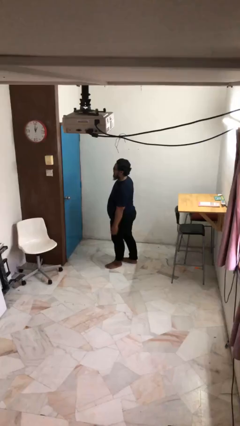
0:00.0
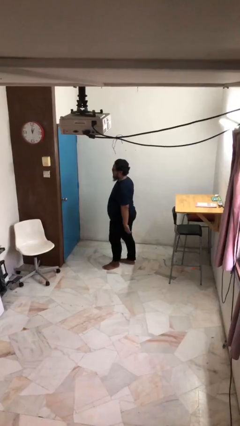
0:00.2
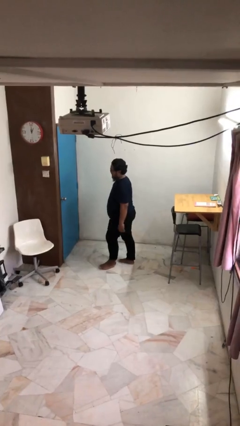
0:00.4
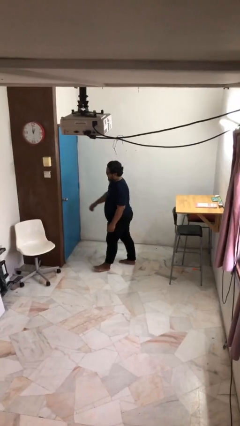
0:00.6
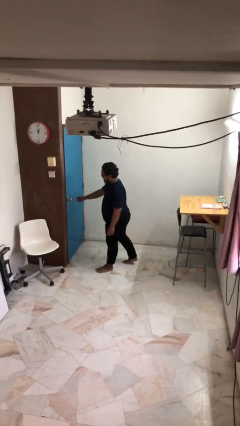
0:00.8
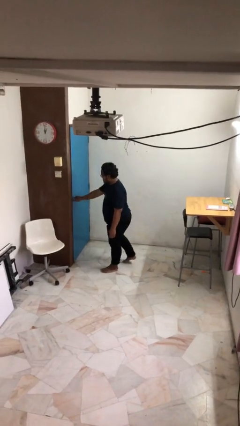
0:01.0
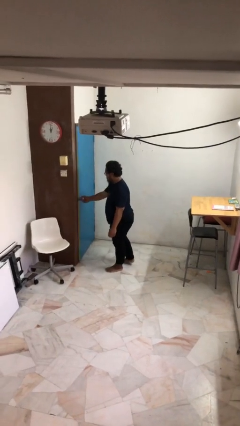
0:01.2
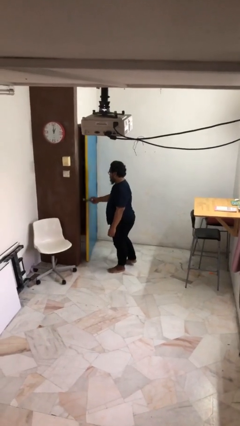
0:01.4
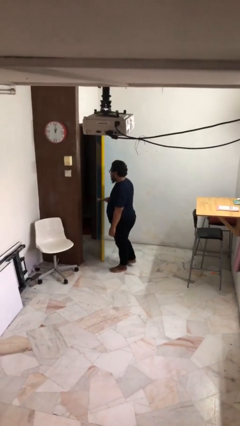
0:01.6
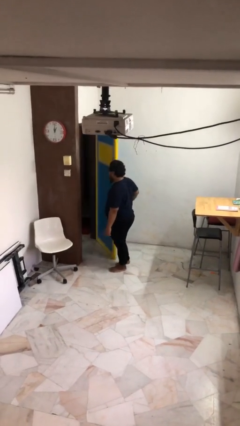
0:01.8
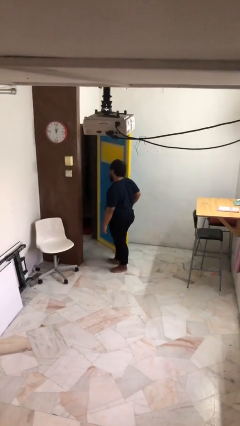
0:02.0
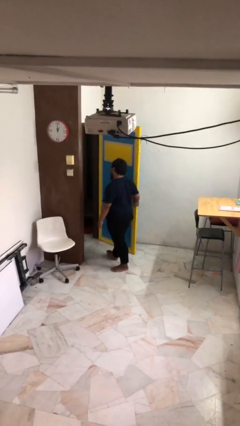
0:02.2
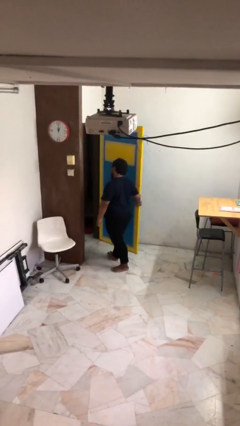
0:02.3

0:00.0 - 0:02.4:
person opens facility door

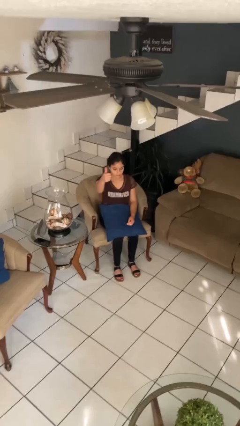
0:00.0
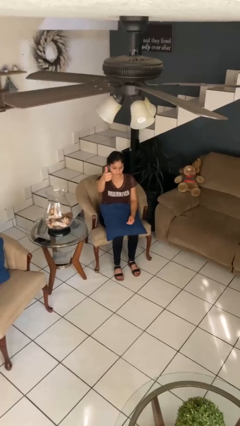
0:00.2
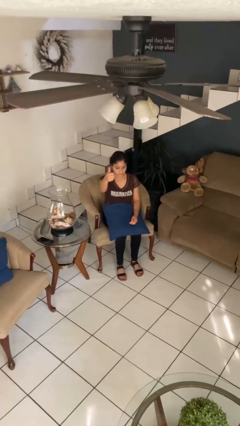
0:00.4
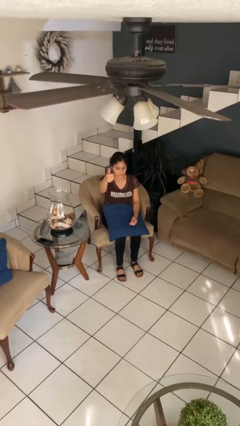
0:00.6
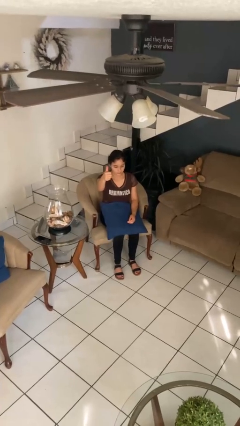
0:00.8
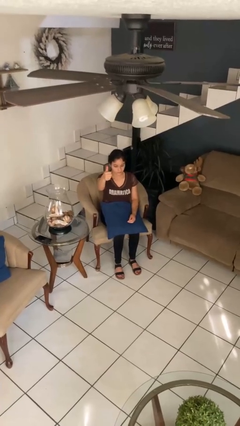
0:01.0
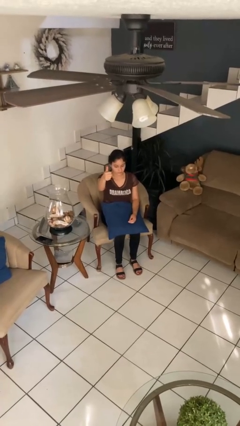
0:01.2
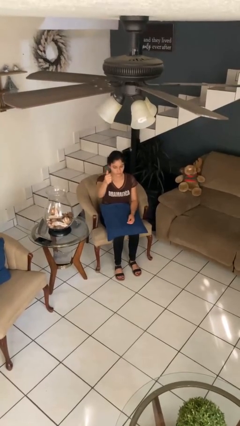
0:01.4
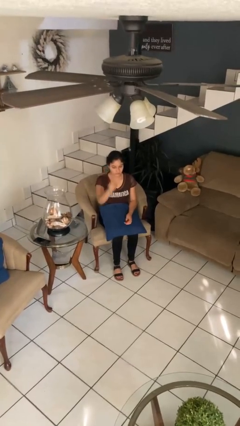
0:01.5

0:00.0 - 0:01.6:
person gestures thumbs up

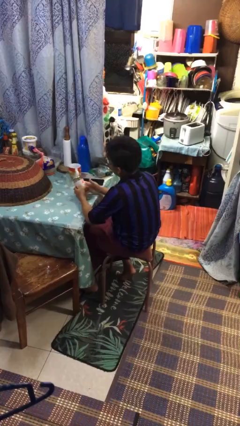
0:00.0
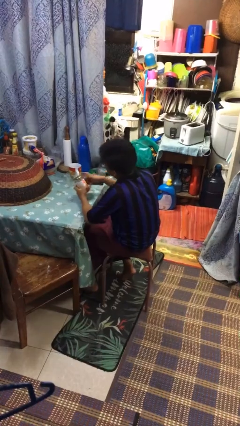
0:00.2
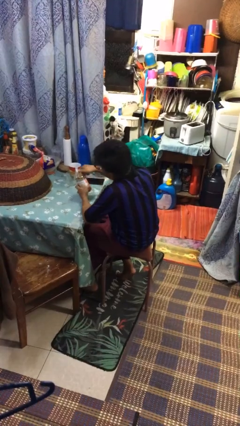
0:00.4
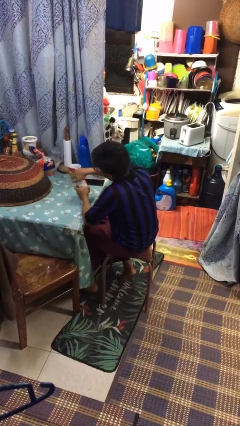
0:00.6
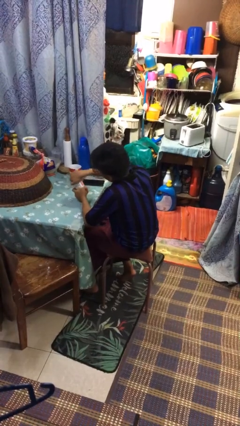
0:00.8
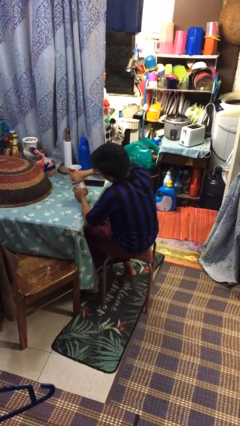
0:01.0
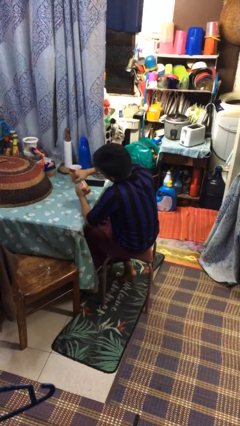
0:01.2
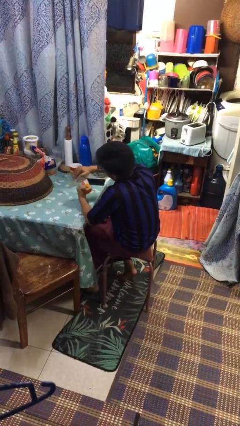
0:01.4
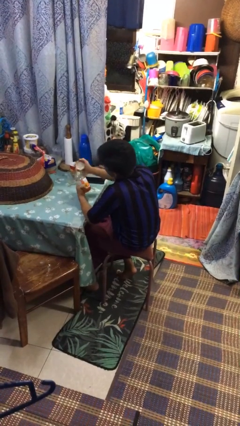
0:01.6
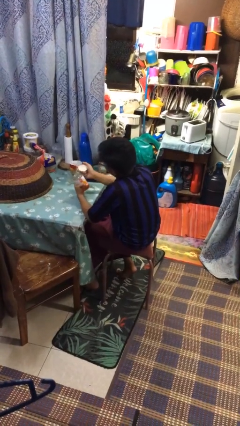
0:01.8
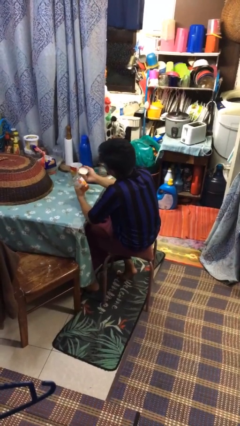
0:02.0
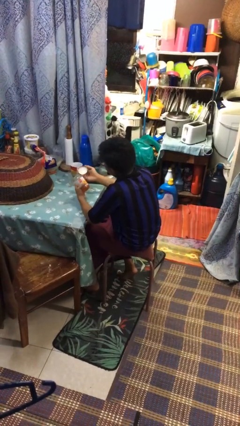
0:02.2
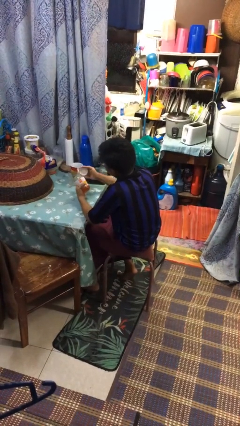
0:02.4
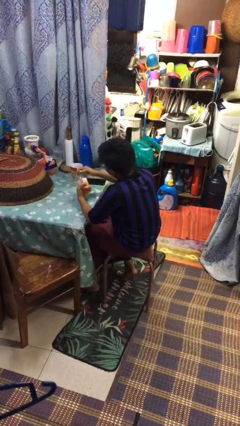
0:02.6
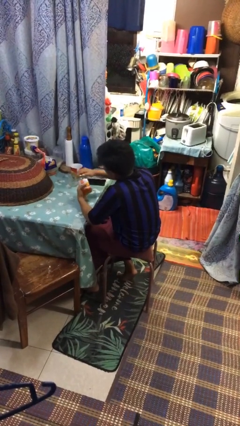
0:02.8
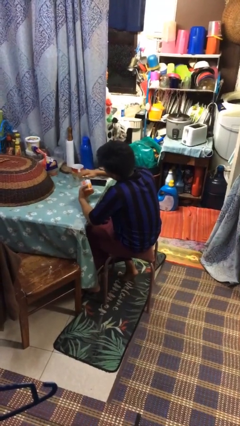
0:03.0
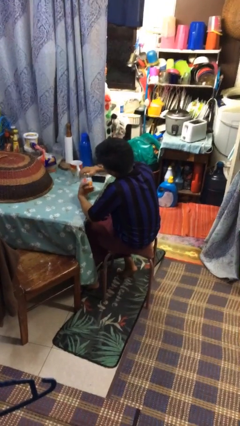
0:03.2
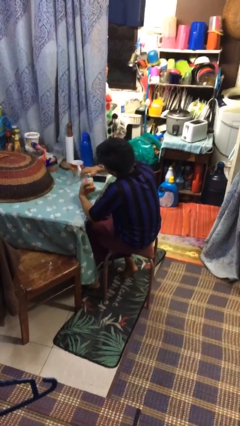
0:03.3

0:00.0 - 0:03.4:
person opens jar

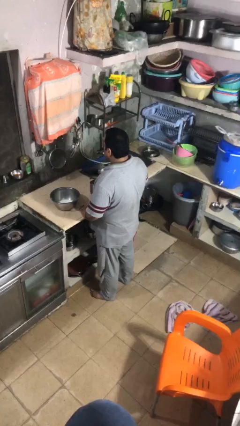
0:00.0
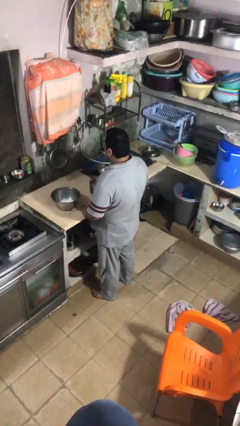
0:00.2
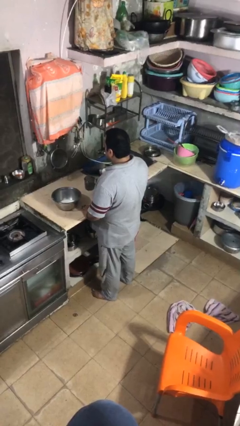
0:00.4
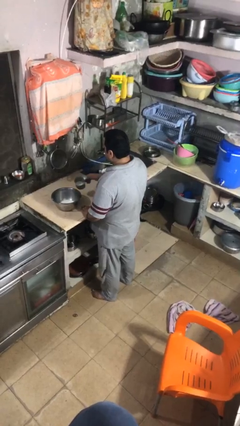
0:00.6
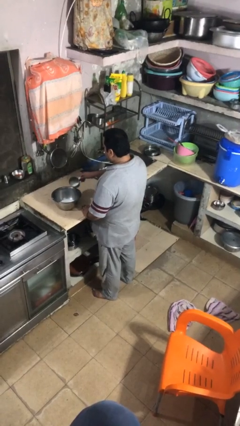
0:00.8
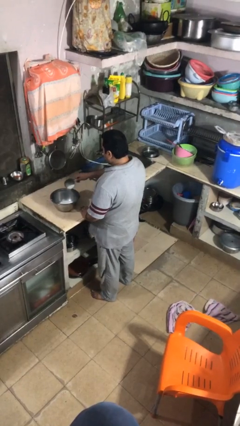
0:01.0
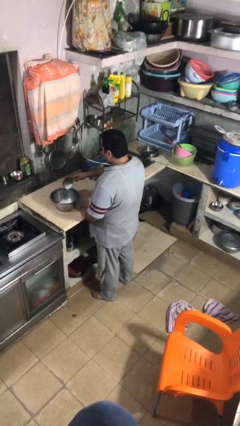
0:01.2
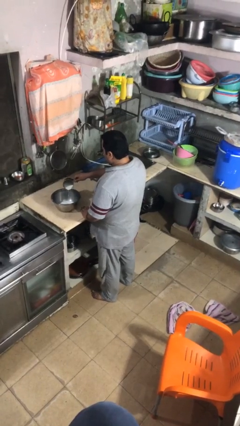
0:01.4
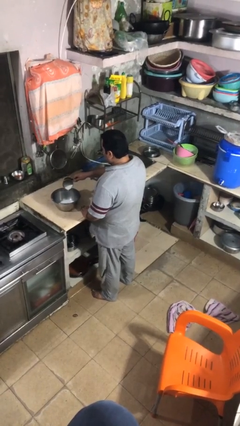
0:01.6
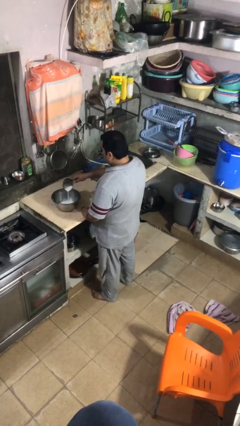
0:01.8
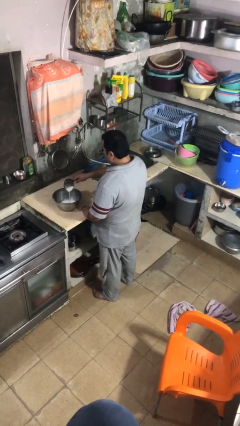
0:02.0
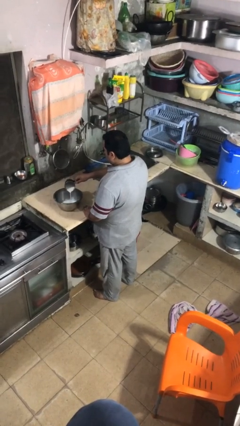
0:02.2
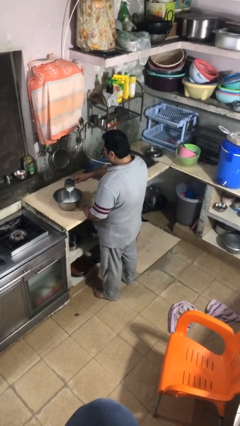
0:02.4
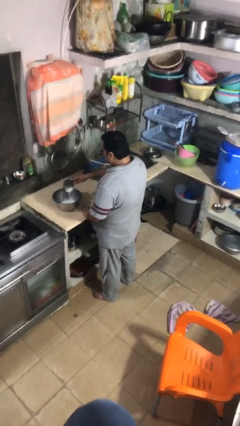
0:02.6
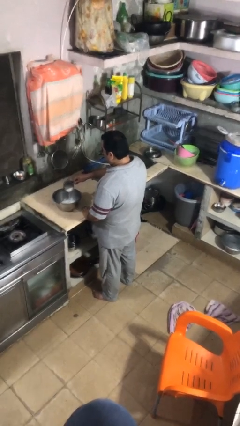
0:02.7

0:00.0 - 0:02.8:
person pours into bowl

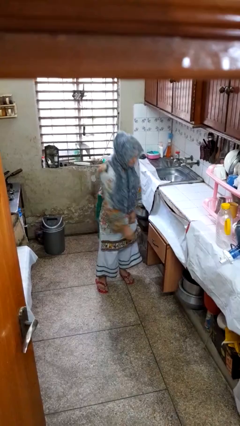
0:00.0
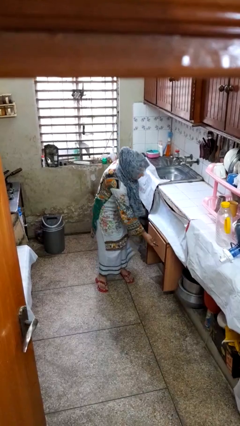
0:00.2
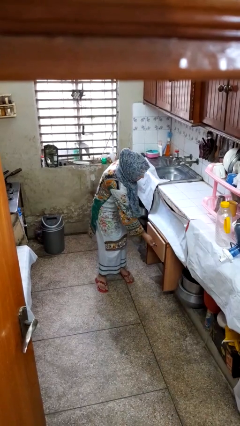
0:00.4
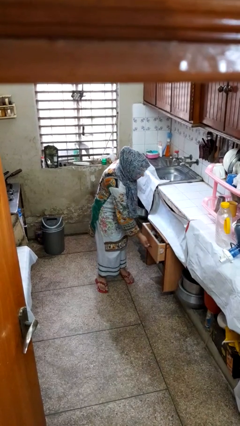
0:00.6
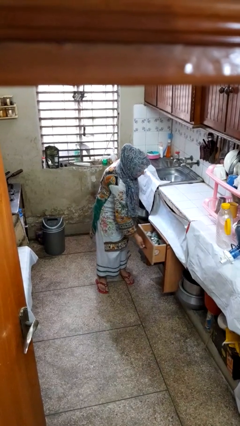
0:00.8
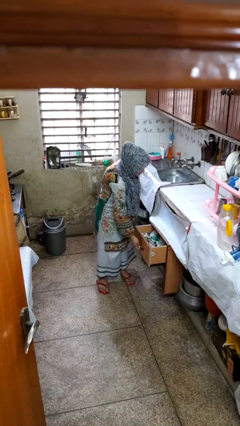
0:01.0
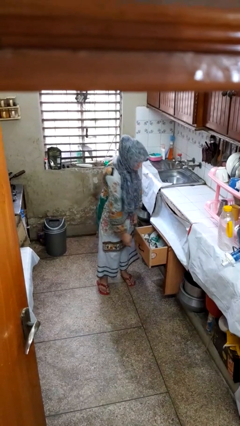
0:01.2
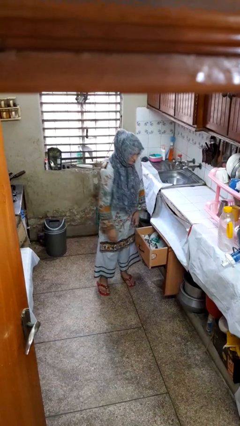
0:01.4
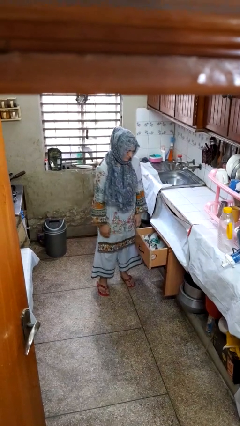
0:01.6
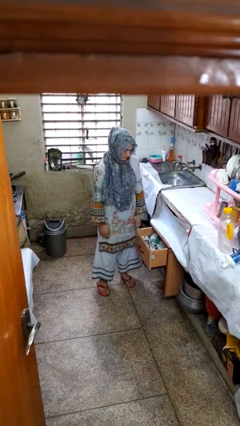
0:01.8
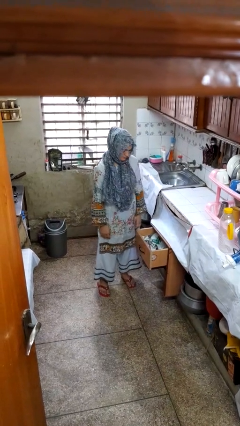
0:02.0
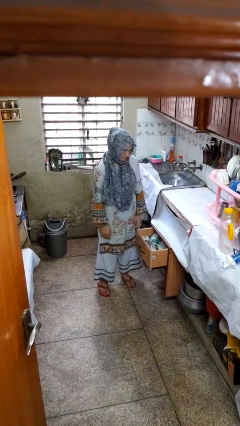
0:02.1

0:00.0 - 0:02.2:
person opens kitchen drawer

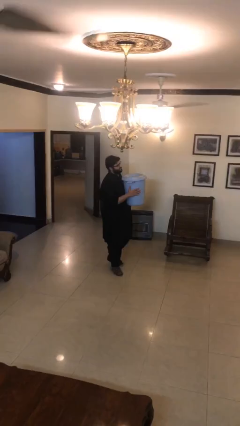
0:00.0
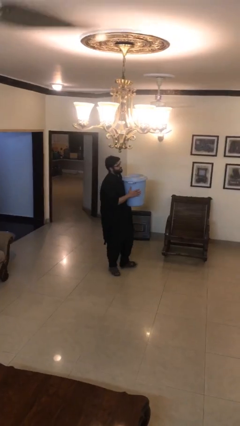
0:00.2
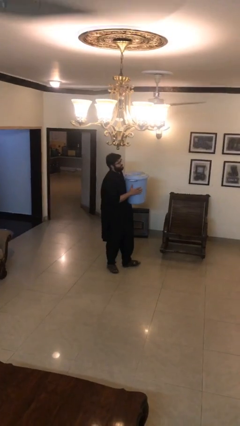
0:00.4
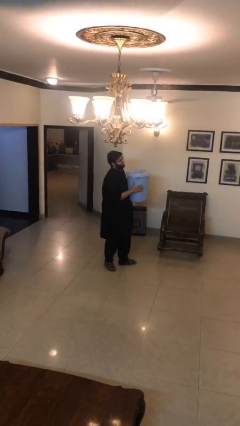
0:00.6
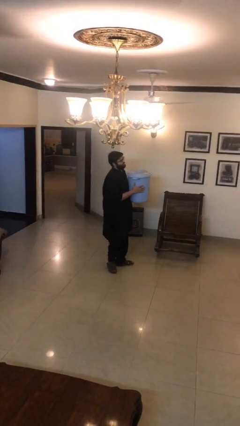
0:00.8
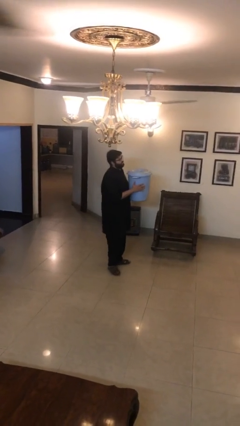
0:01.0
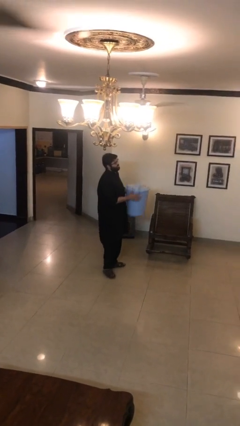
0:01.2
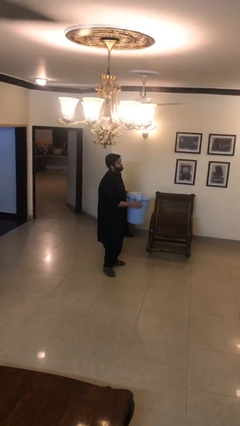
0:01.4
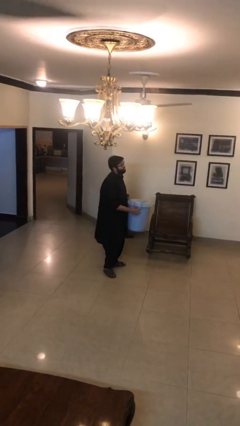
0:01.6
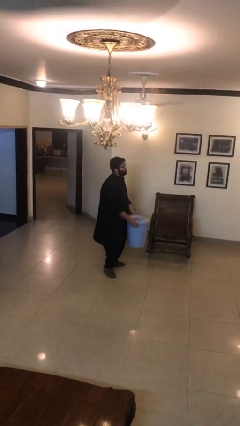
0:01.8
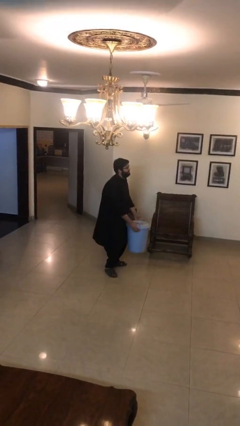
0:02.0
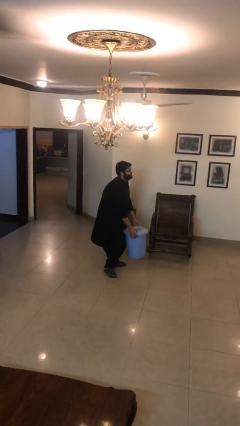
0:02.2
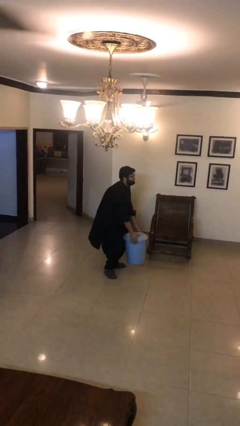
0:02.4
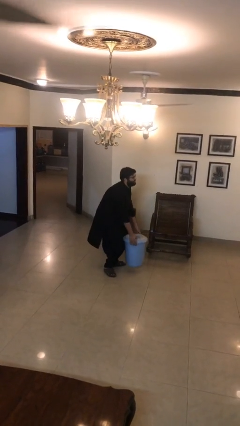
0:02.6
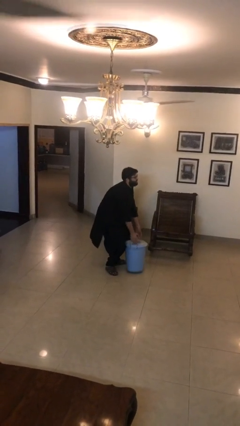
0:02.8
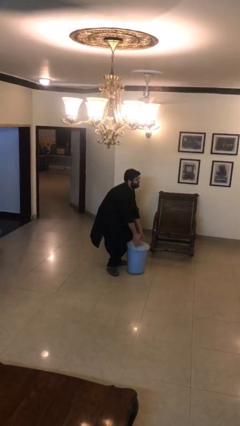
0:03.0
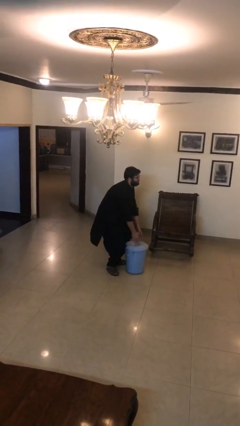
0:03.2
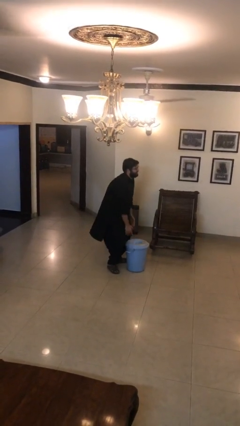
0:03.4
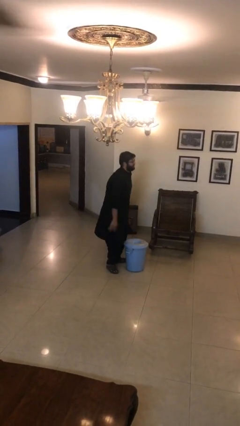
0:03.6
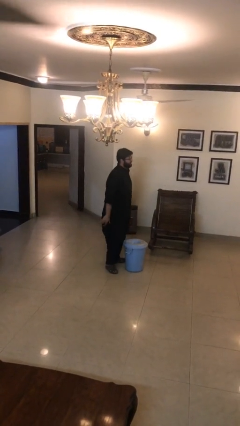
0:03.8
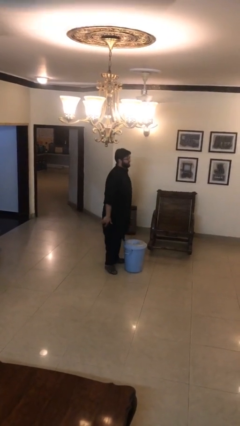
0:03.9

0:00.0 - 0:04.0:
person puts down object on floor

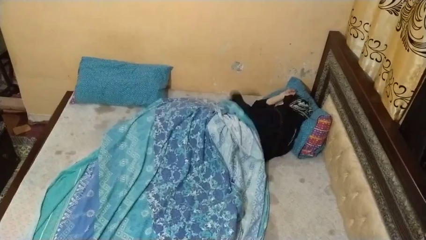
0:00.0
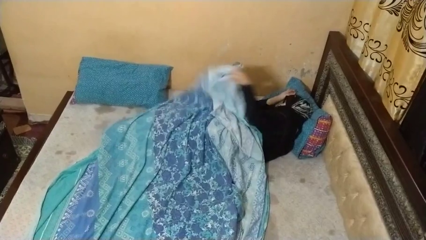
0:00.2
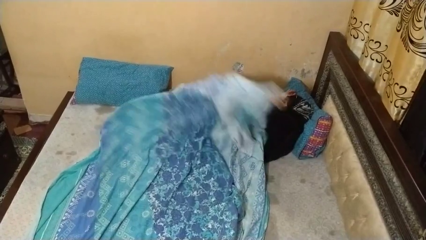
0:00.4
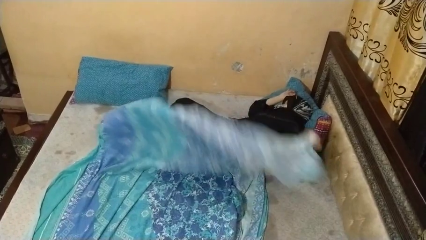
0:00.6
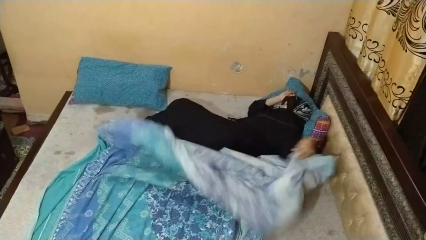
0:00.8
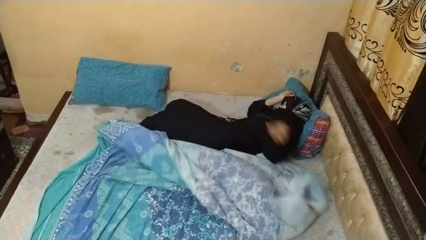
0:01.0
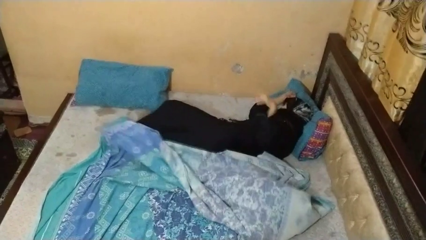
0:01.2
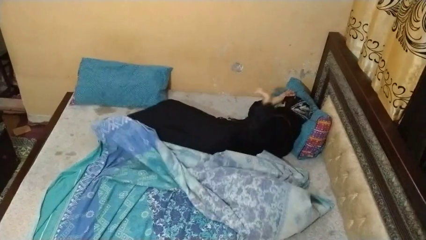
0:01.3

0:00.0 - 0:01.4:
person uncovers with bedsheets
